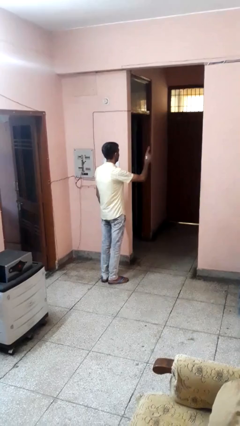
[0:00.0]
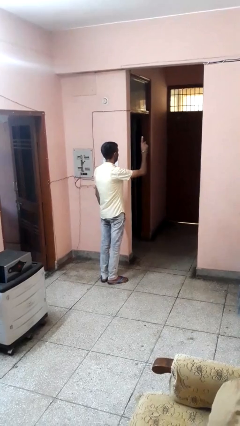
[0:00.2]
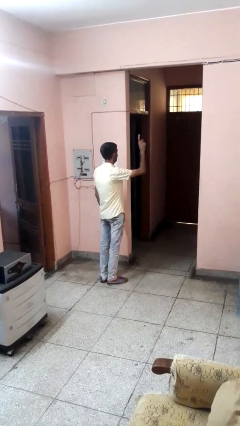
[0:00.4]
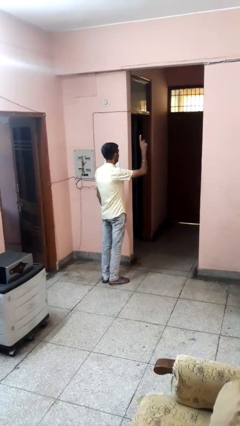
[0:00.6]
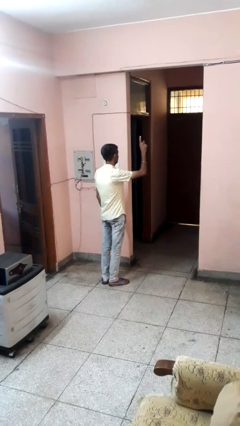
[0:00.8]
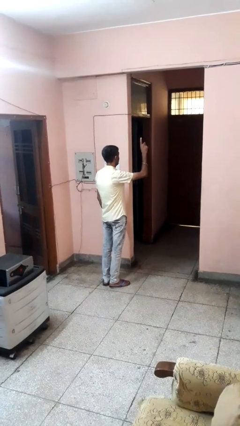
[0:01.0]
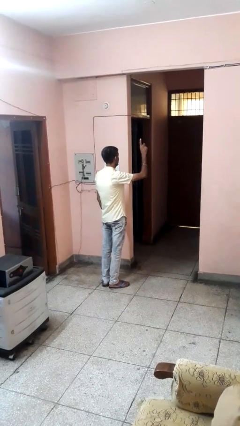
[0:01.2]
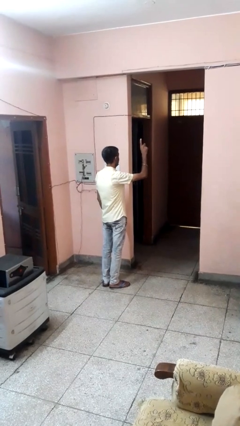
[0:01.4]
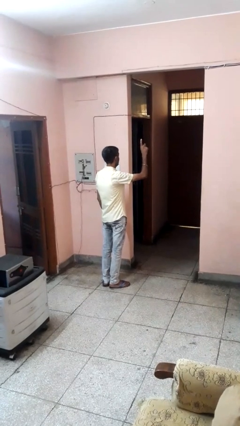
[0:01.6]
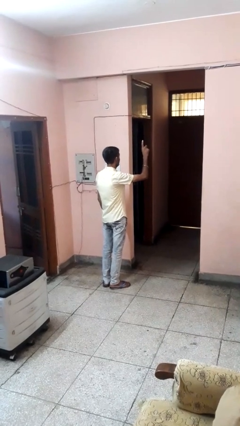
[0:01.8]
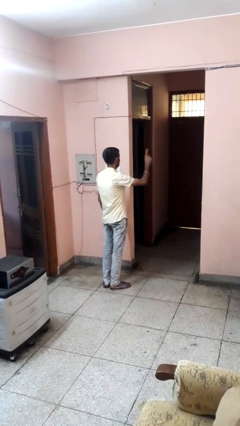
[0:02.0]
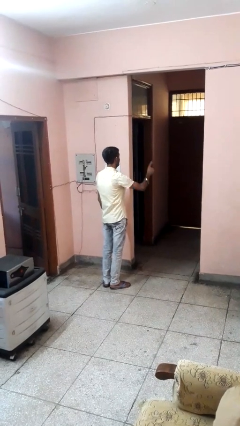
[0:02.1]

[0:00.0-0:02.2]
person gestures raise hand

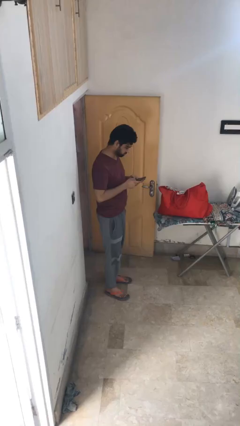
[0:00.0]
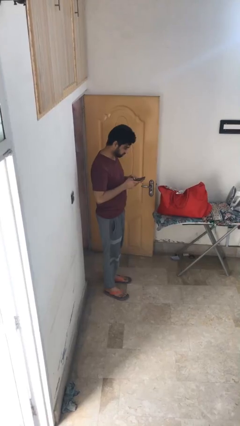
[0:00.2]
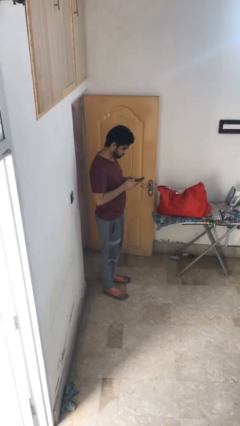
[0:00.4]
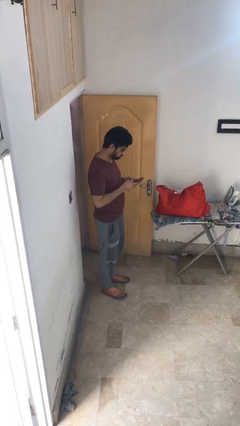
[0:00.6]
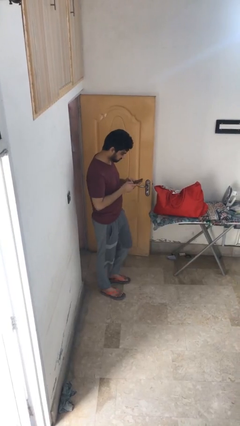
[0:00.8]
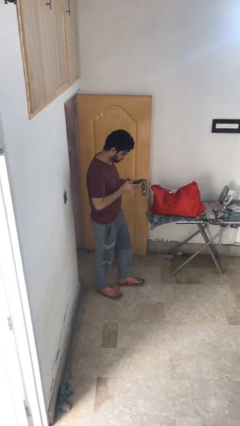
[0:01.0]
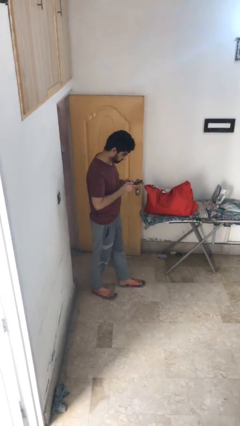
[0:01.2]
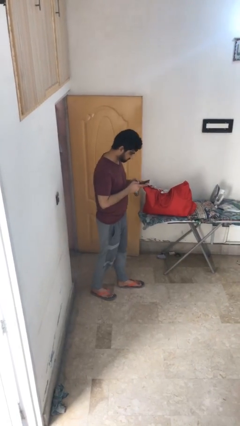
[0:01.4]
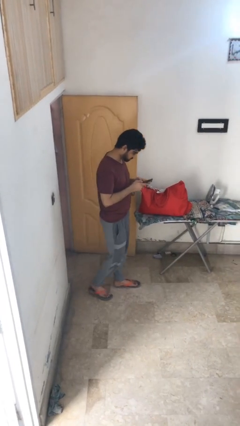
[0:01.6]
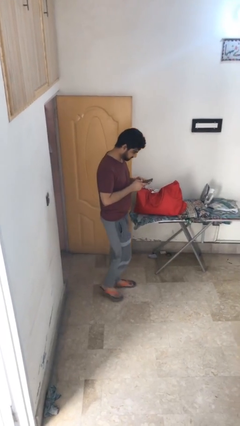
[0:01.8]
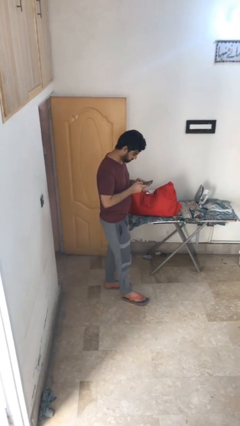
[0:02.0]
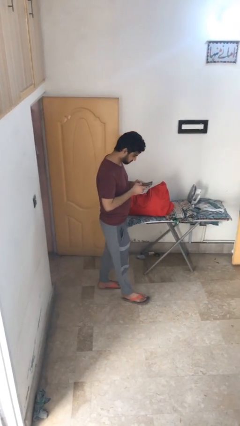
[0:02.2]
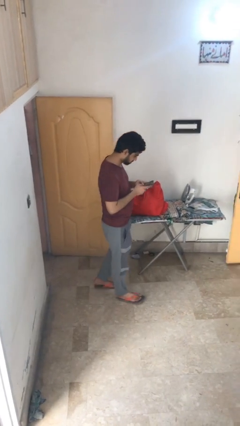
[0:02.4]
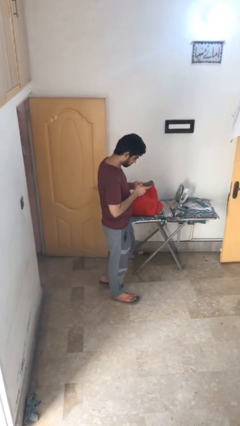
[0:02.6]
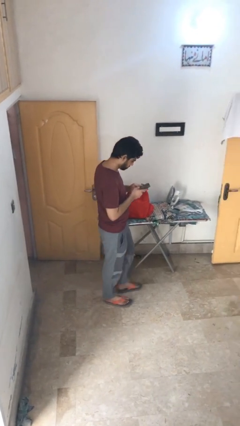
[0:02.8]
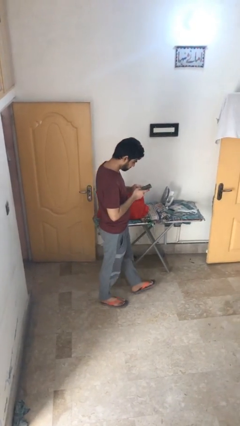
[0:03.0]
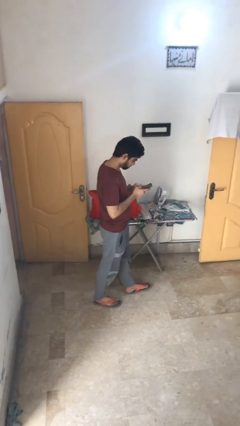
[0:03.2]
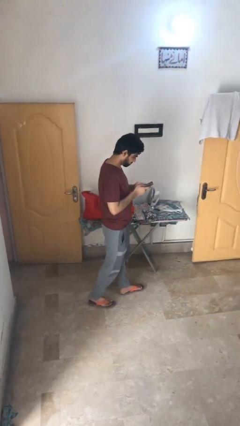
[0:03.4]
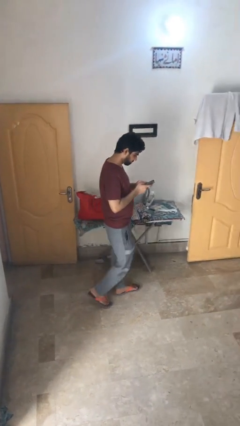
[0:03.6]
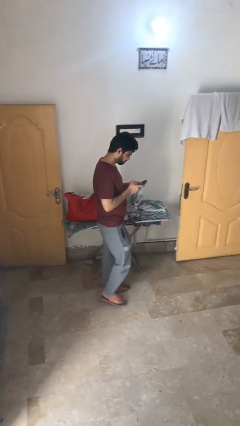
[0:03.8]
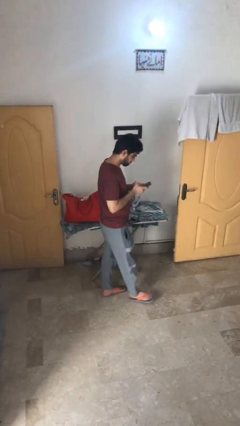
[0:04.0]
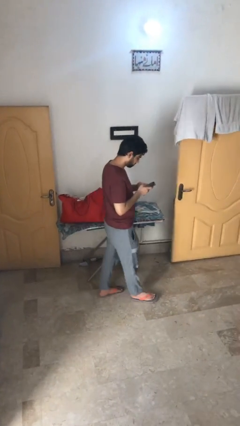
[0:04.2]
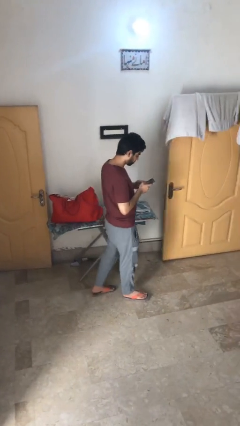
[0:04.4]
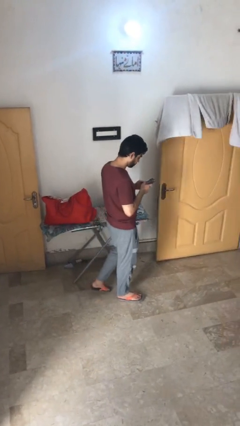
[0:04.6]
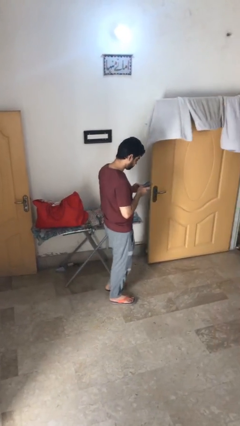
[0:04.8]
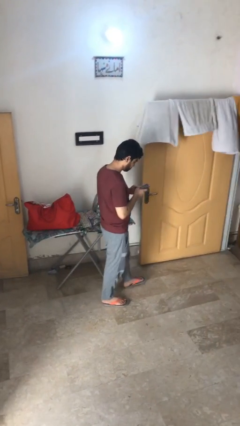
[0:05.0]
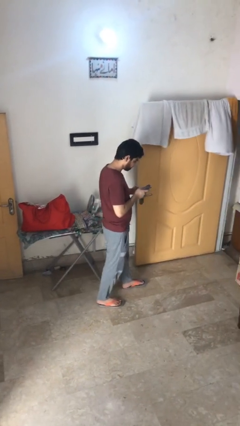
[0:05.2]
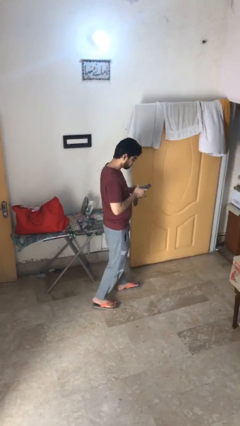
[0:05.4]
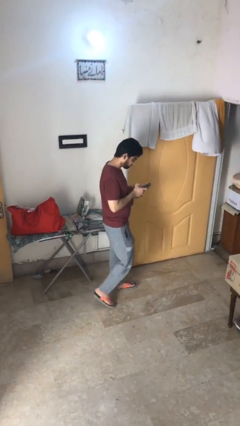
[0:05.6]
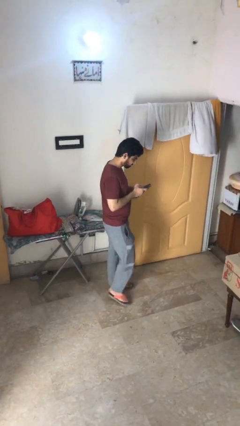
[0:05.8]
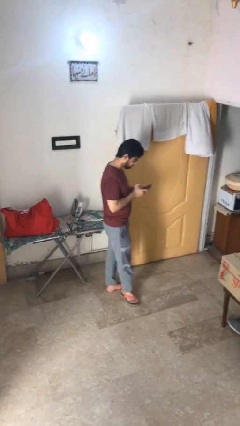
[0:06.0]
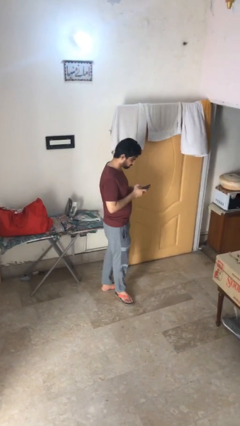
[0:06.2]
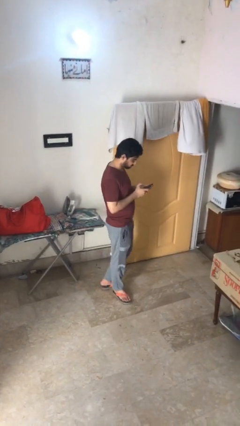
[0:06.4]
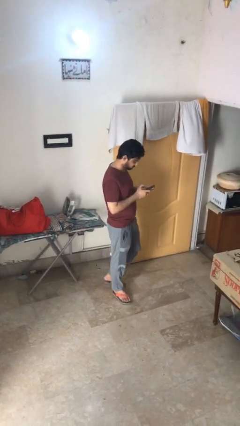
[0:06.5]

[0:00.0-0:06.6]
person texts on phone

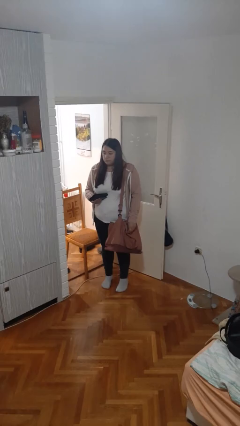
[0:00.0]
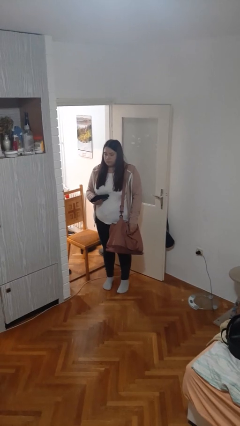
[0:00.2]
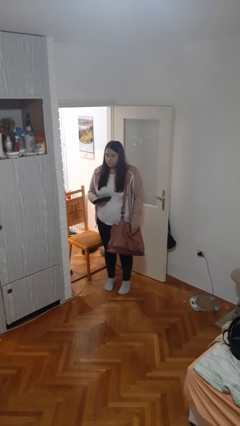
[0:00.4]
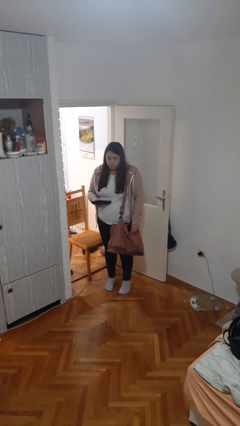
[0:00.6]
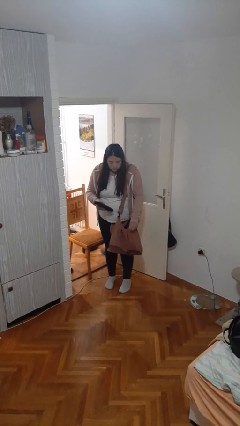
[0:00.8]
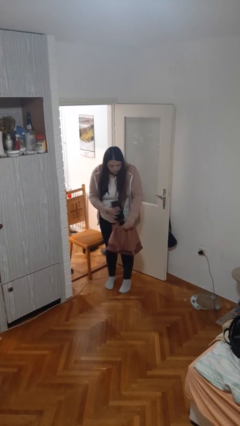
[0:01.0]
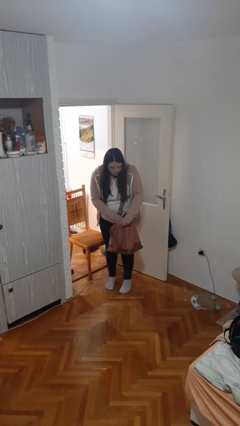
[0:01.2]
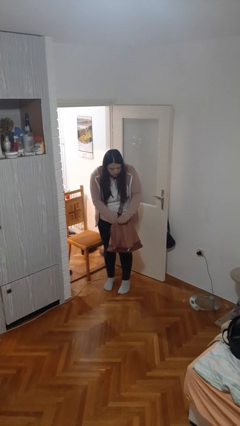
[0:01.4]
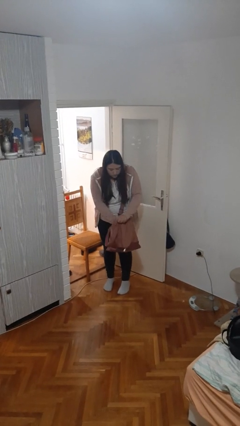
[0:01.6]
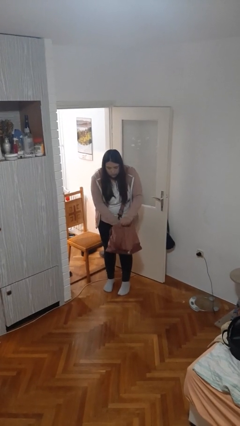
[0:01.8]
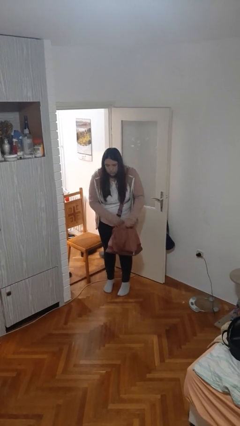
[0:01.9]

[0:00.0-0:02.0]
person puts object into purse

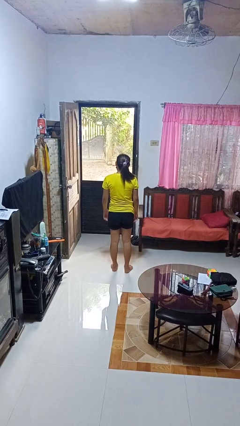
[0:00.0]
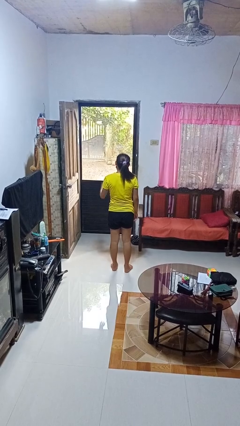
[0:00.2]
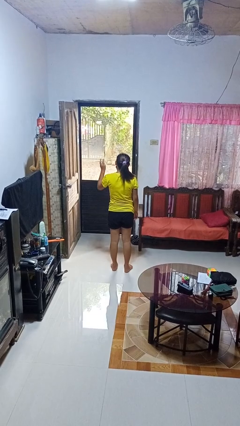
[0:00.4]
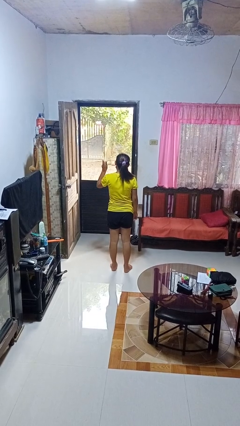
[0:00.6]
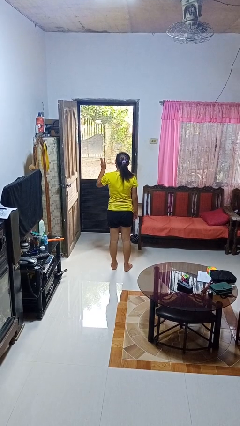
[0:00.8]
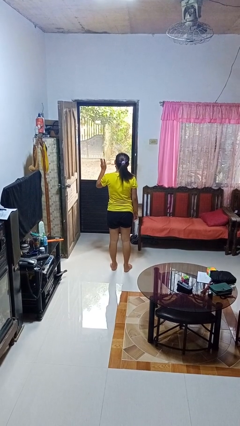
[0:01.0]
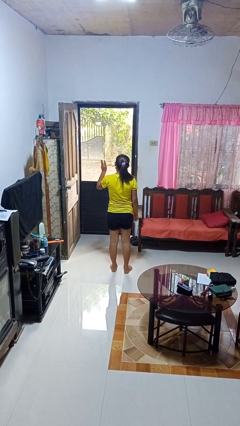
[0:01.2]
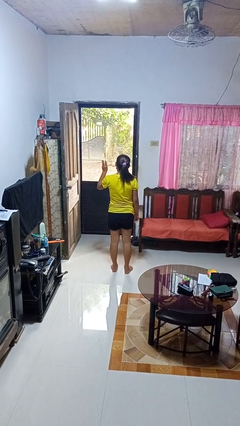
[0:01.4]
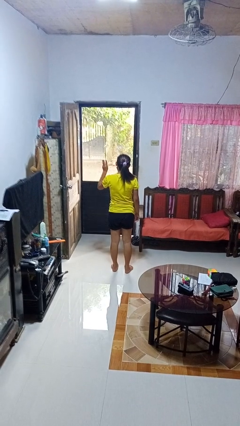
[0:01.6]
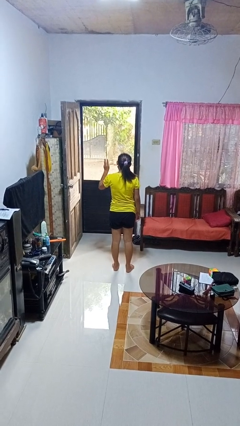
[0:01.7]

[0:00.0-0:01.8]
person gestures number three

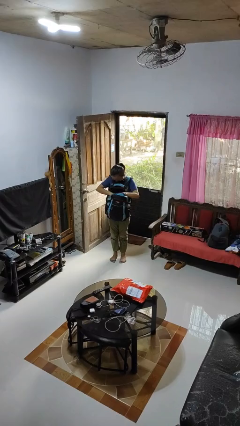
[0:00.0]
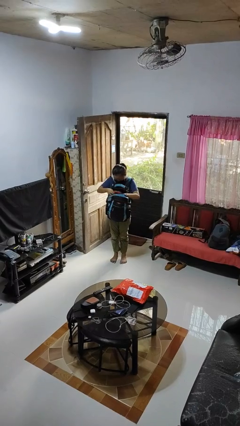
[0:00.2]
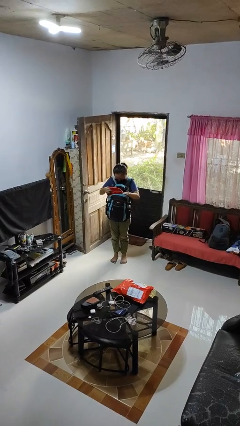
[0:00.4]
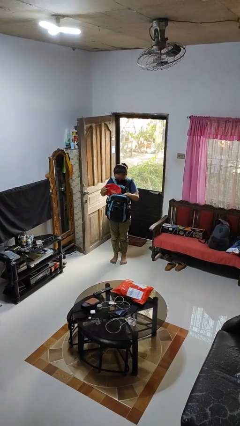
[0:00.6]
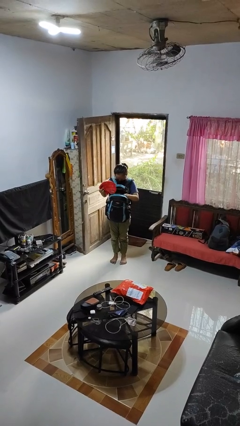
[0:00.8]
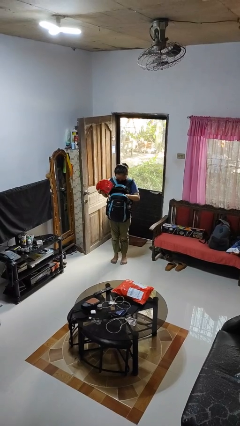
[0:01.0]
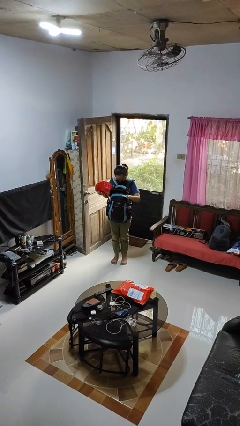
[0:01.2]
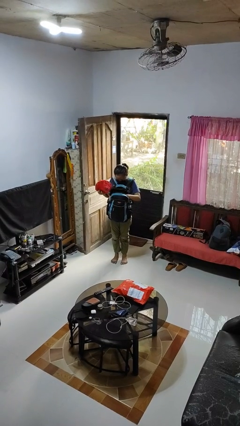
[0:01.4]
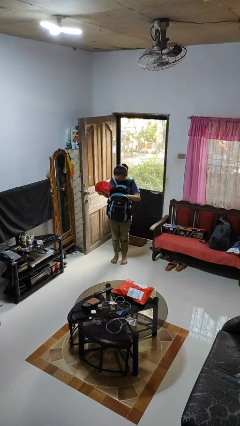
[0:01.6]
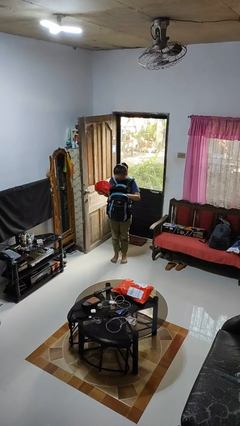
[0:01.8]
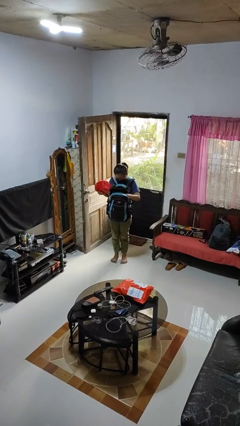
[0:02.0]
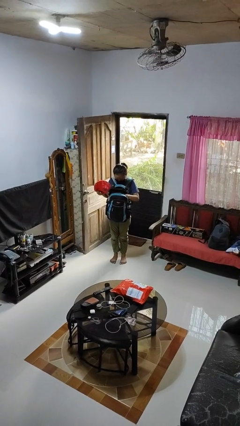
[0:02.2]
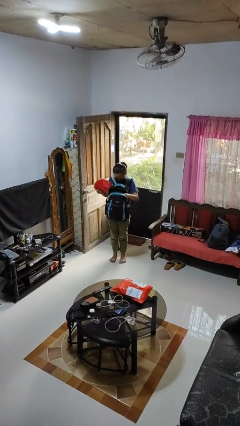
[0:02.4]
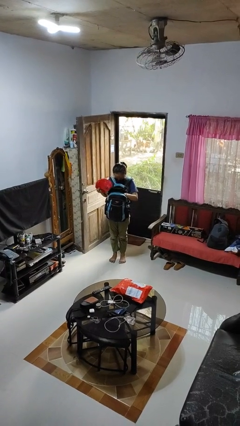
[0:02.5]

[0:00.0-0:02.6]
person takes object from backpack

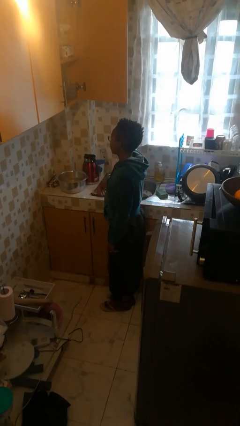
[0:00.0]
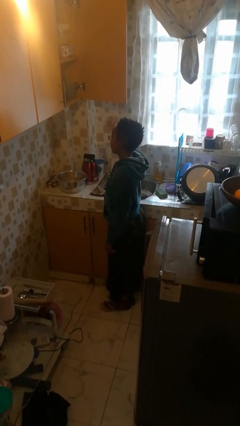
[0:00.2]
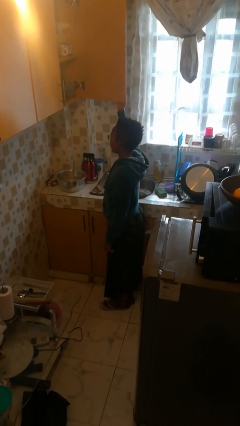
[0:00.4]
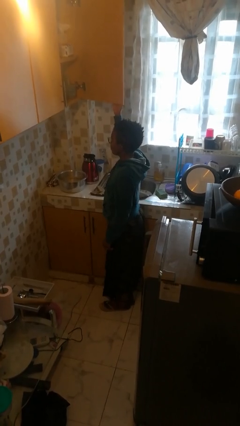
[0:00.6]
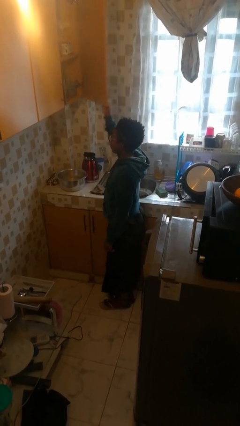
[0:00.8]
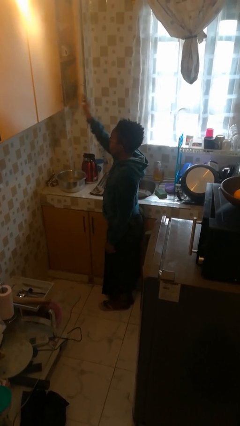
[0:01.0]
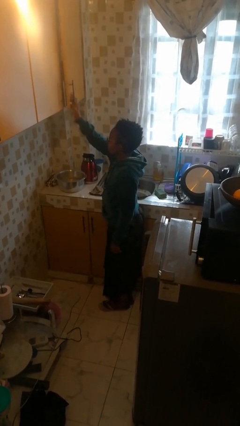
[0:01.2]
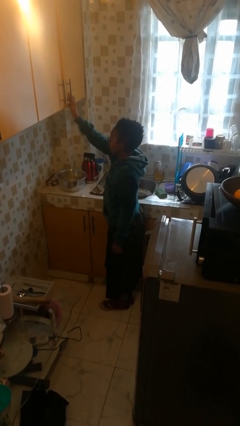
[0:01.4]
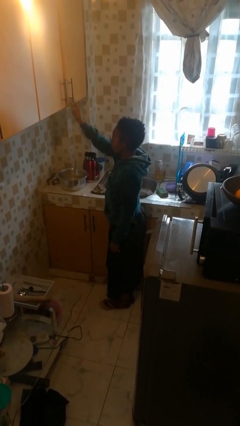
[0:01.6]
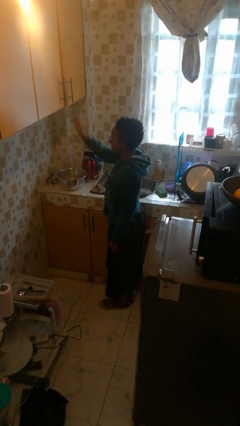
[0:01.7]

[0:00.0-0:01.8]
person closes cabinet
